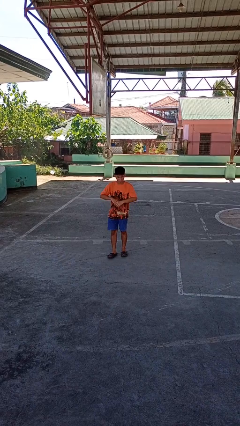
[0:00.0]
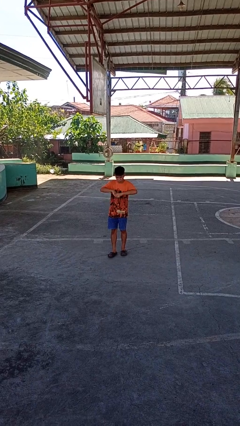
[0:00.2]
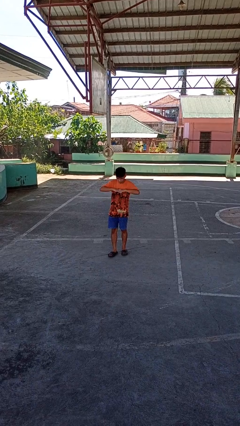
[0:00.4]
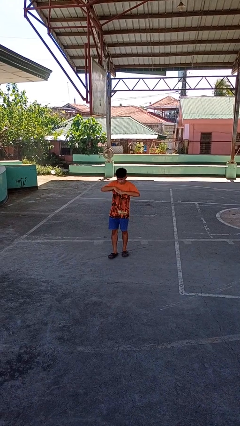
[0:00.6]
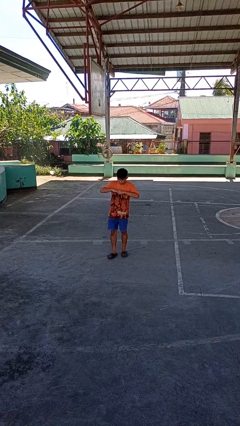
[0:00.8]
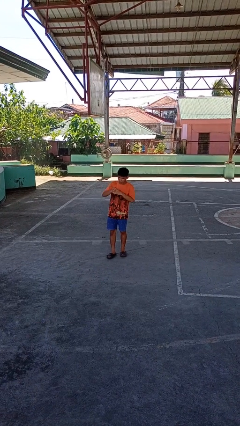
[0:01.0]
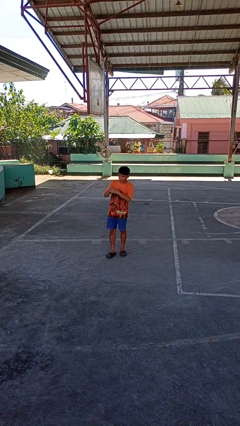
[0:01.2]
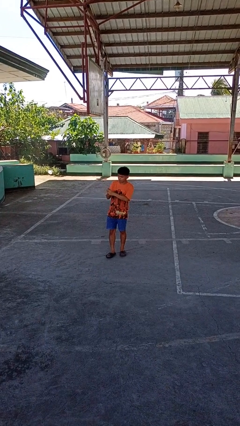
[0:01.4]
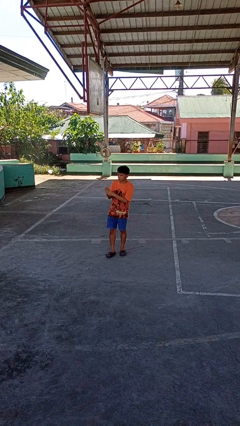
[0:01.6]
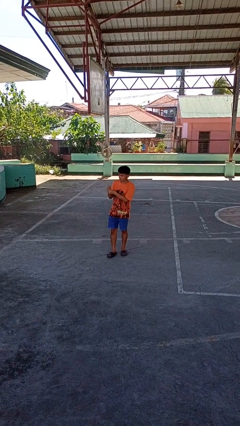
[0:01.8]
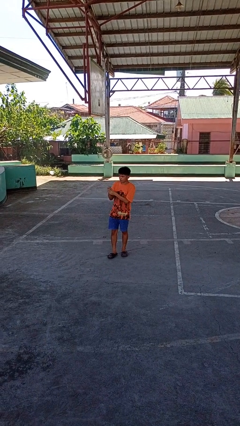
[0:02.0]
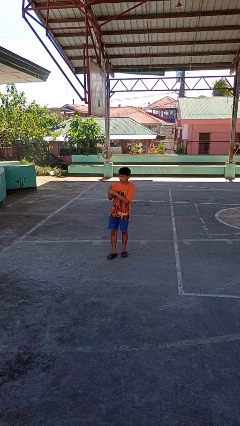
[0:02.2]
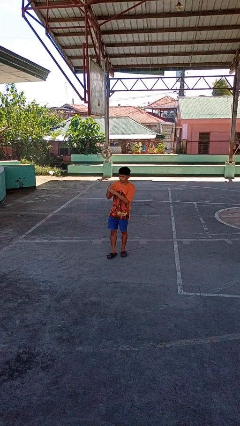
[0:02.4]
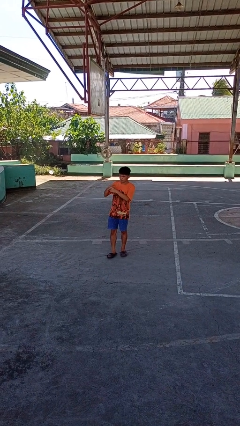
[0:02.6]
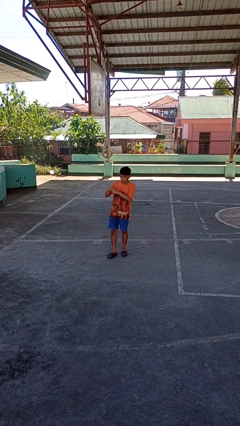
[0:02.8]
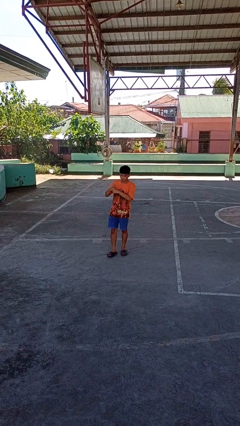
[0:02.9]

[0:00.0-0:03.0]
person cracks knuckles

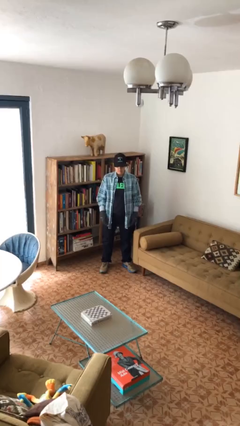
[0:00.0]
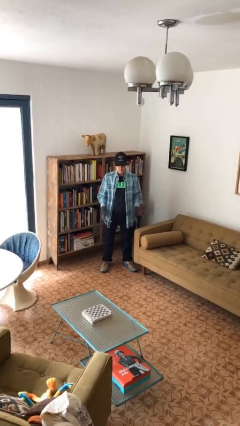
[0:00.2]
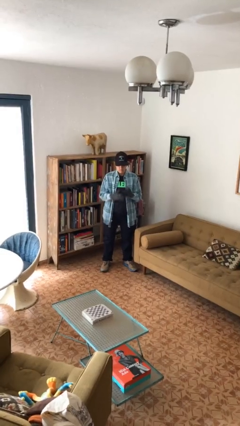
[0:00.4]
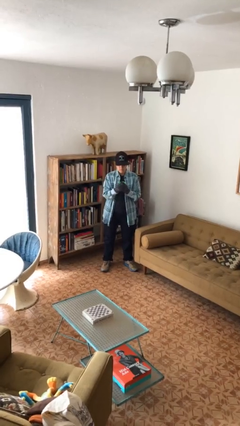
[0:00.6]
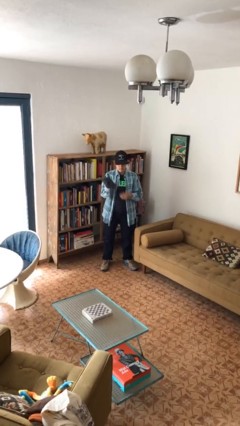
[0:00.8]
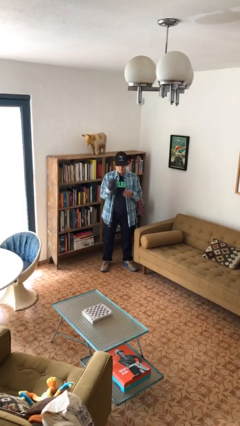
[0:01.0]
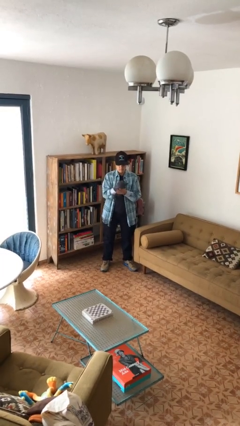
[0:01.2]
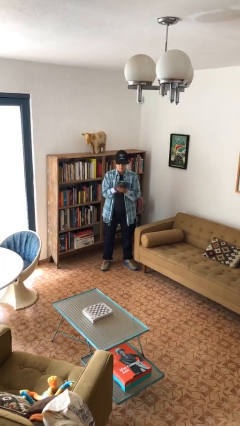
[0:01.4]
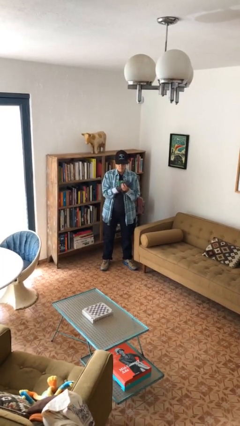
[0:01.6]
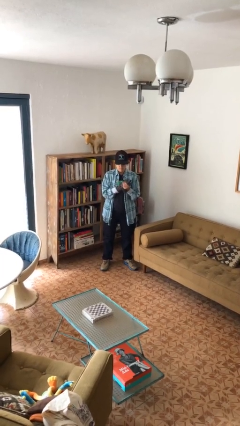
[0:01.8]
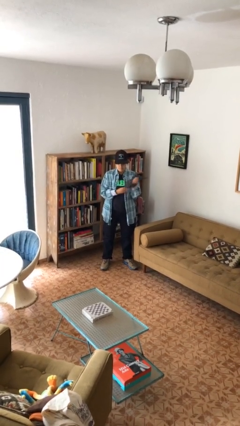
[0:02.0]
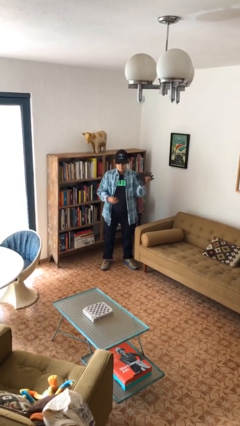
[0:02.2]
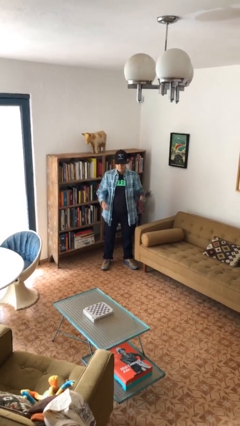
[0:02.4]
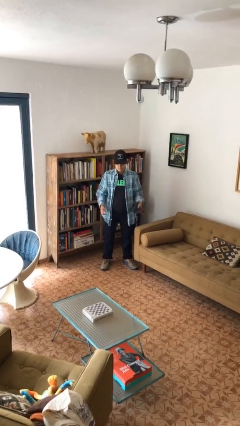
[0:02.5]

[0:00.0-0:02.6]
person takes off gloves

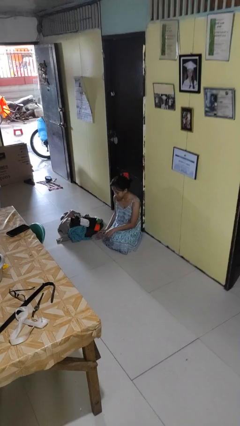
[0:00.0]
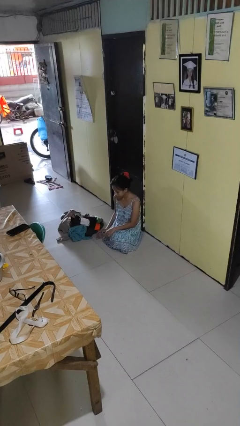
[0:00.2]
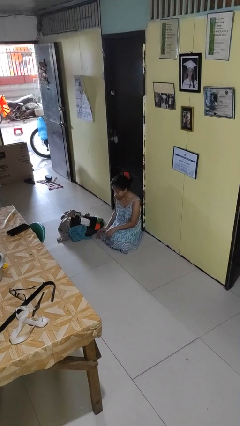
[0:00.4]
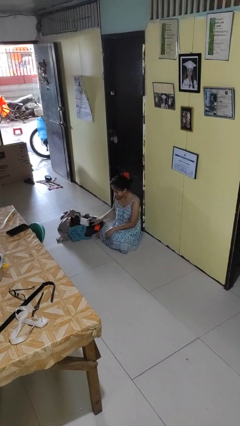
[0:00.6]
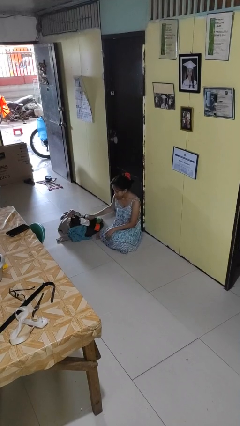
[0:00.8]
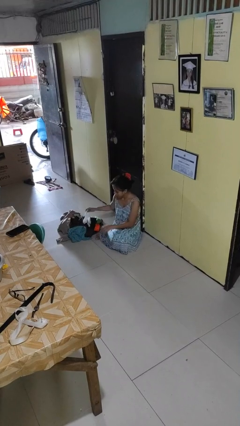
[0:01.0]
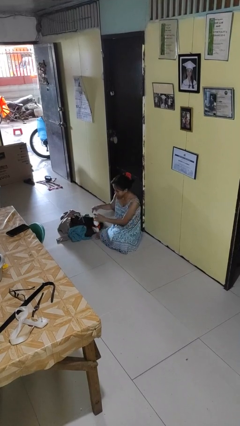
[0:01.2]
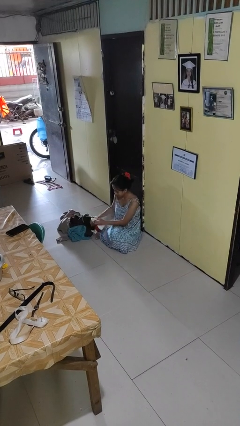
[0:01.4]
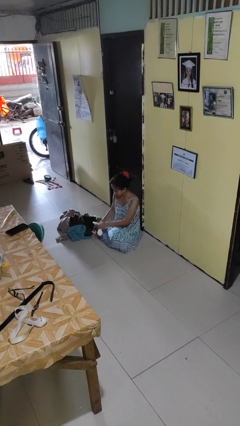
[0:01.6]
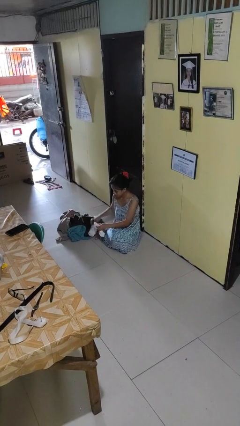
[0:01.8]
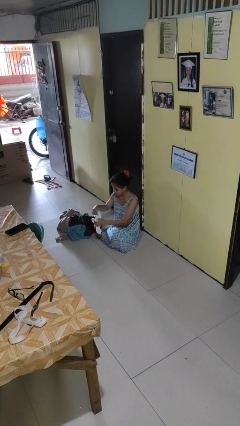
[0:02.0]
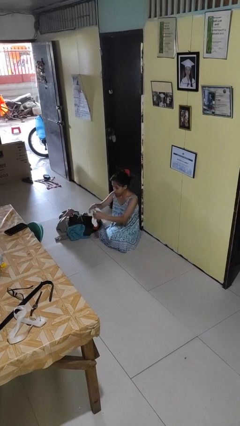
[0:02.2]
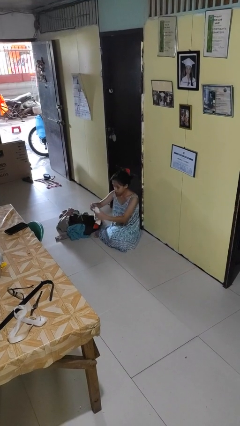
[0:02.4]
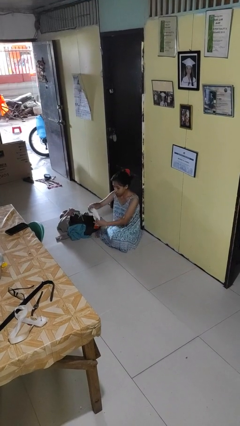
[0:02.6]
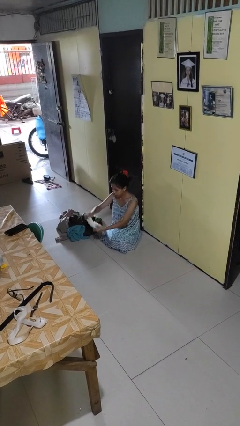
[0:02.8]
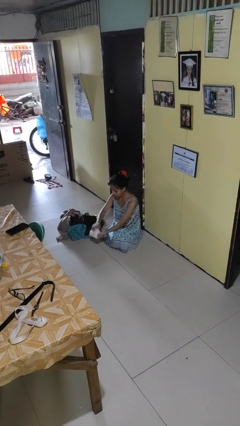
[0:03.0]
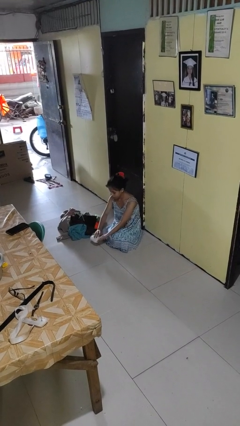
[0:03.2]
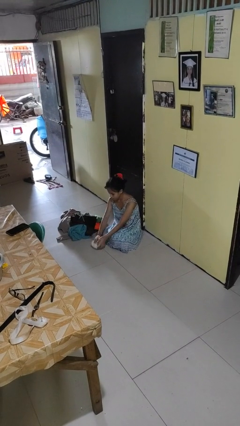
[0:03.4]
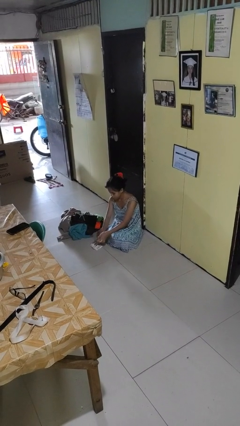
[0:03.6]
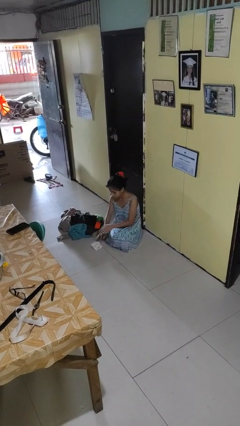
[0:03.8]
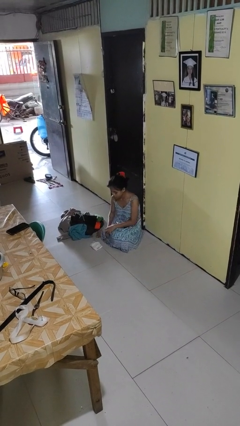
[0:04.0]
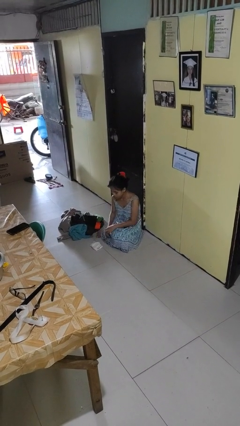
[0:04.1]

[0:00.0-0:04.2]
person folds socks

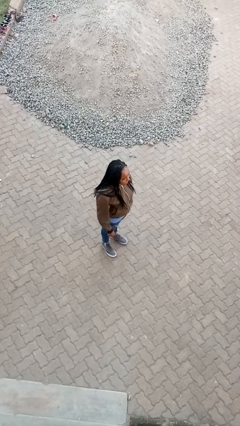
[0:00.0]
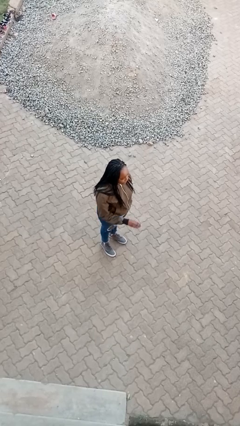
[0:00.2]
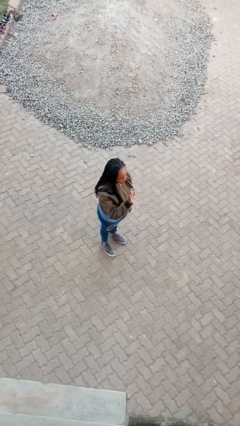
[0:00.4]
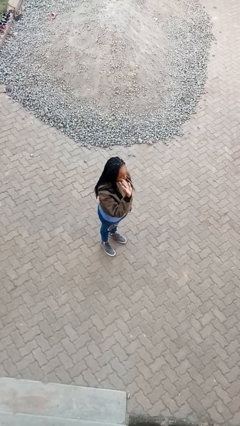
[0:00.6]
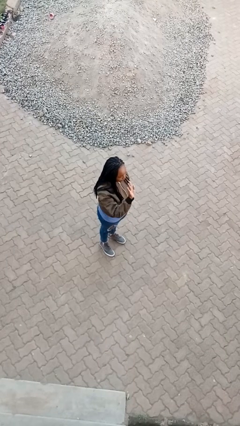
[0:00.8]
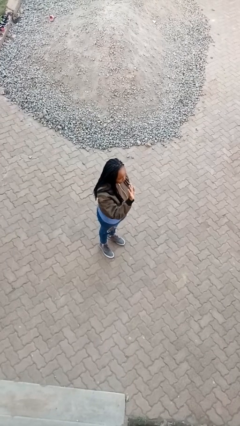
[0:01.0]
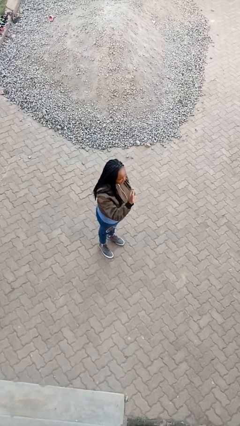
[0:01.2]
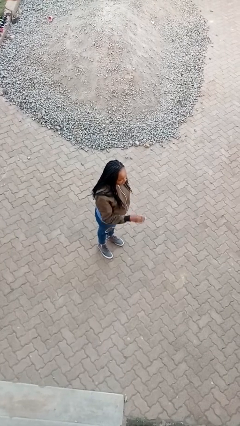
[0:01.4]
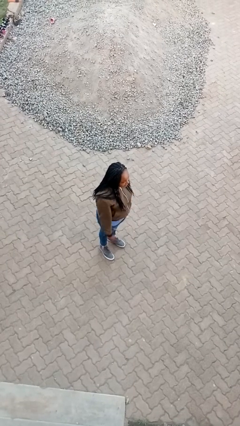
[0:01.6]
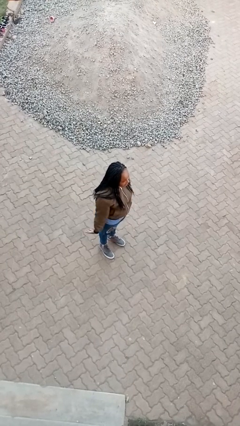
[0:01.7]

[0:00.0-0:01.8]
person gestures stop

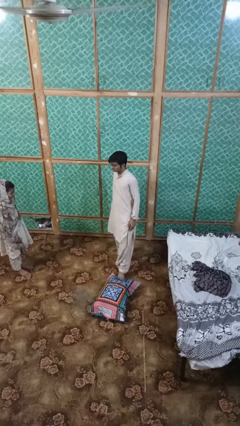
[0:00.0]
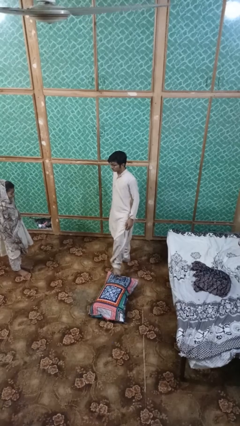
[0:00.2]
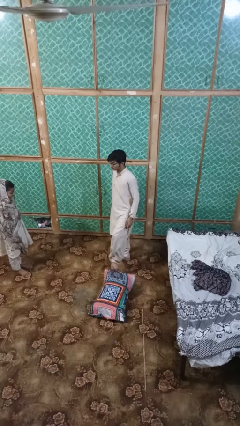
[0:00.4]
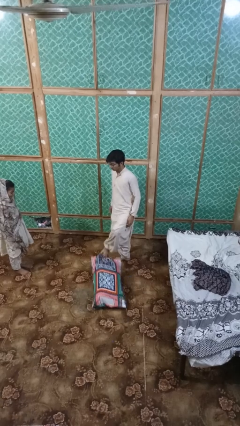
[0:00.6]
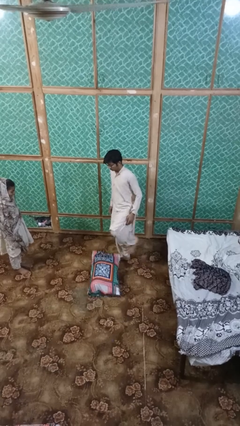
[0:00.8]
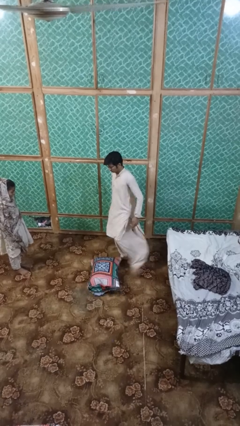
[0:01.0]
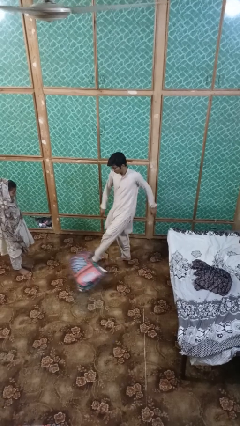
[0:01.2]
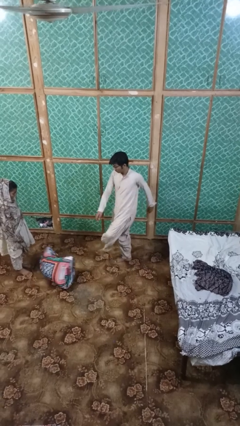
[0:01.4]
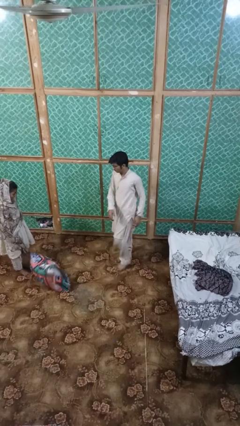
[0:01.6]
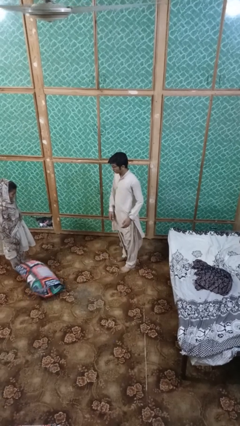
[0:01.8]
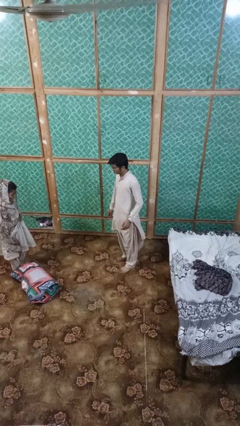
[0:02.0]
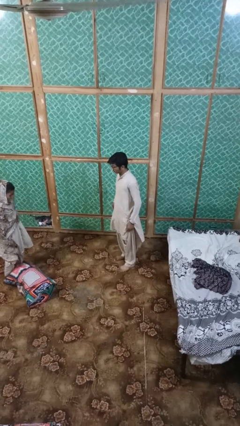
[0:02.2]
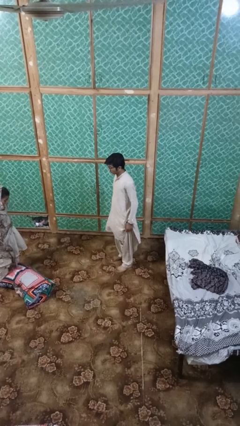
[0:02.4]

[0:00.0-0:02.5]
person kicks object to person

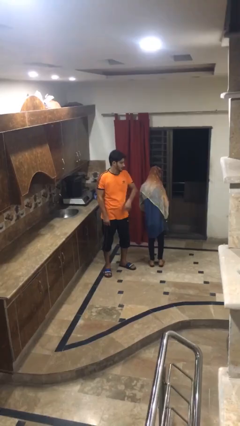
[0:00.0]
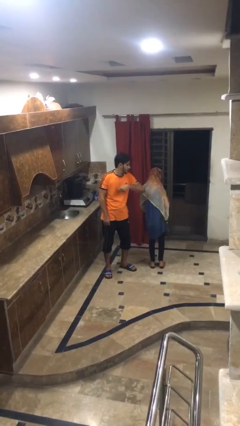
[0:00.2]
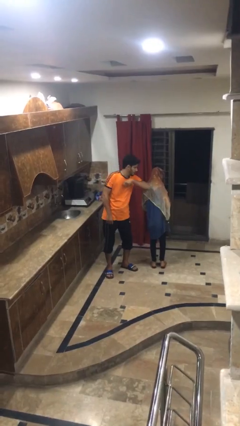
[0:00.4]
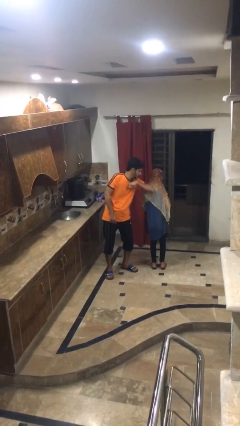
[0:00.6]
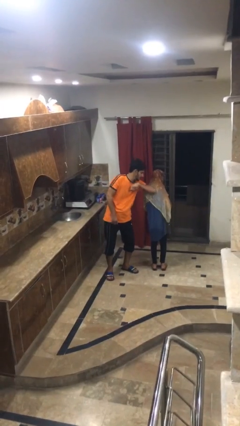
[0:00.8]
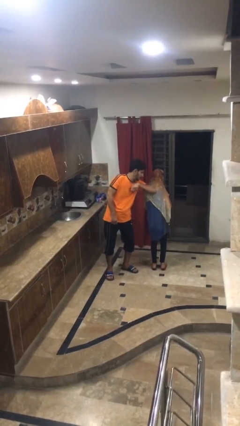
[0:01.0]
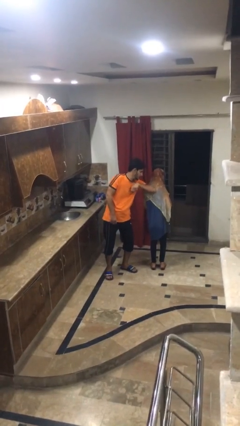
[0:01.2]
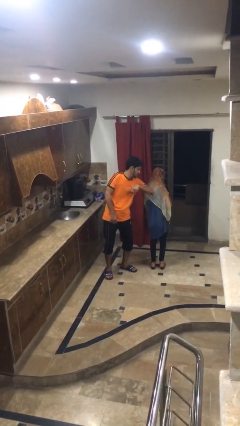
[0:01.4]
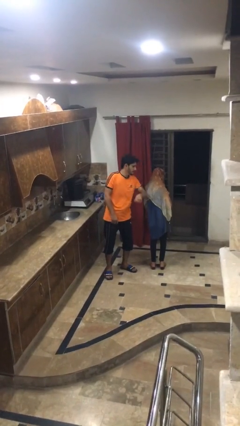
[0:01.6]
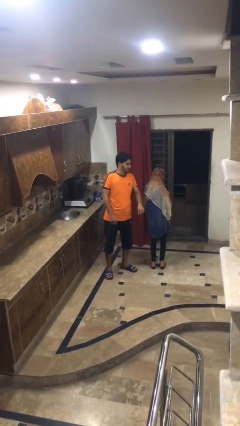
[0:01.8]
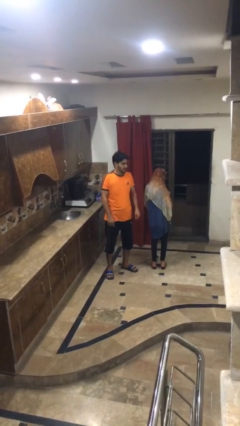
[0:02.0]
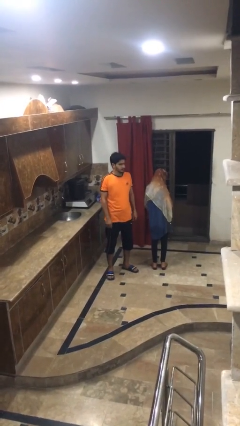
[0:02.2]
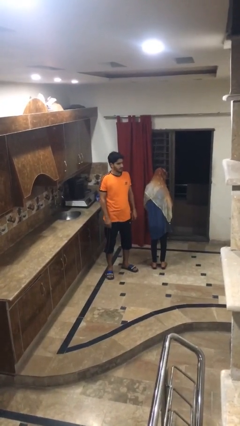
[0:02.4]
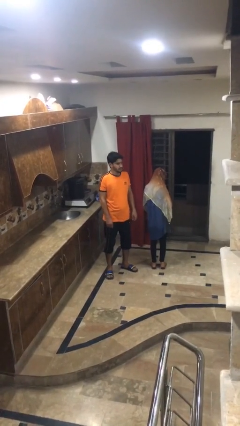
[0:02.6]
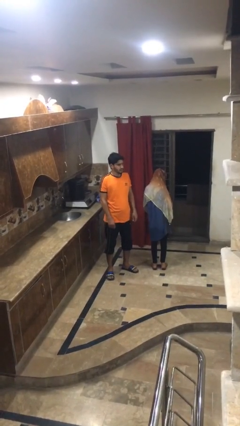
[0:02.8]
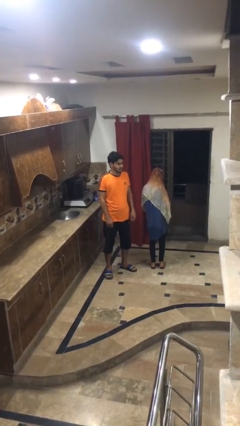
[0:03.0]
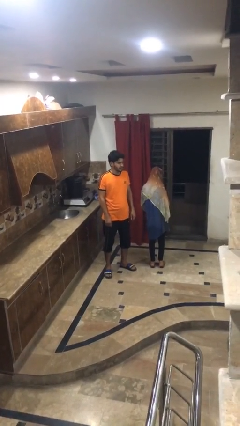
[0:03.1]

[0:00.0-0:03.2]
person nudges person with elbow
